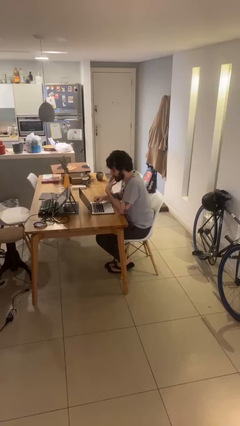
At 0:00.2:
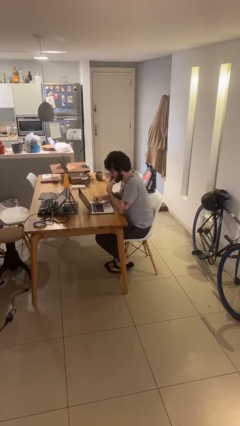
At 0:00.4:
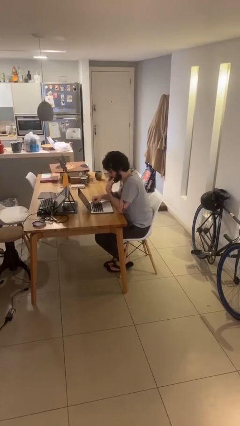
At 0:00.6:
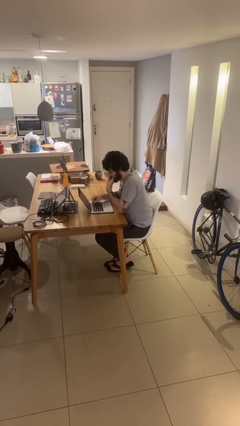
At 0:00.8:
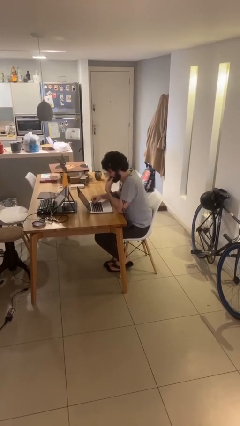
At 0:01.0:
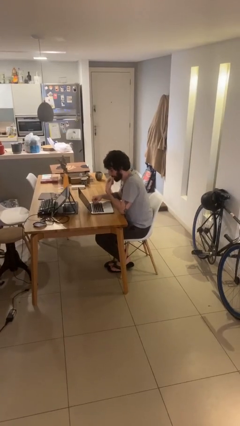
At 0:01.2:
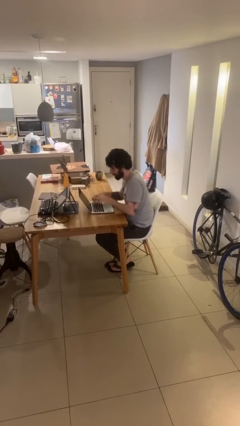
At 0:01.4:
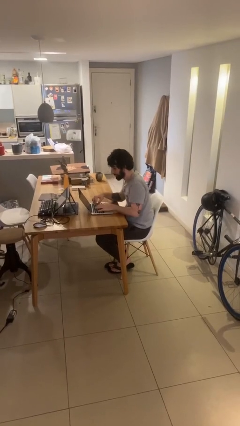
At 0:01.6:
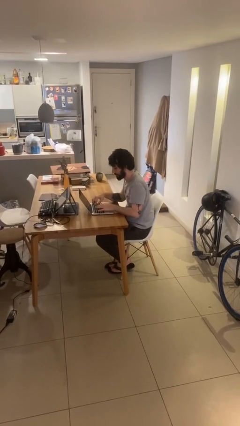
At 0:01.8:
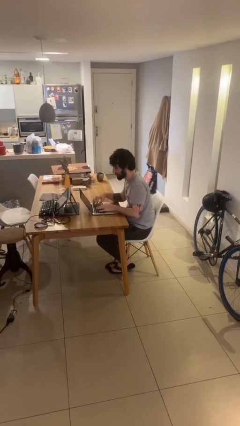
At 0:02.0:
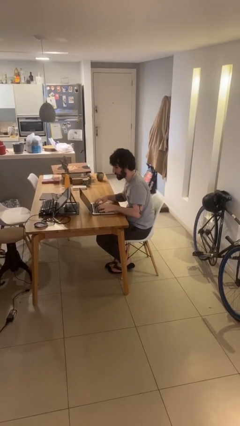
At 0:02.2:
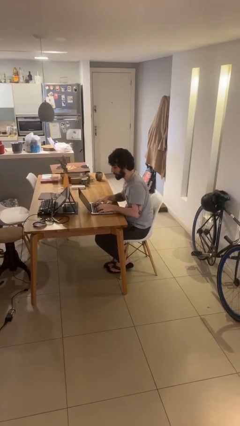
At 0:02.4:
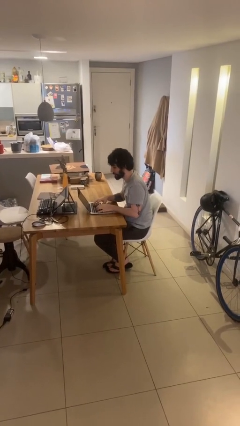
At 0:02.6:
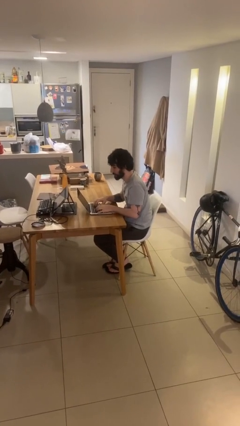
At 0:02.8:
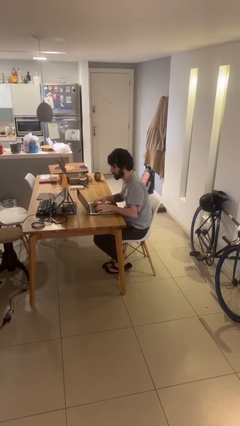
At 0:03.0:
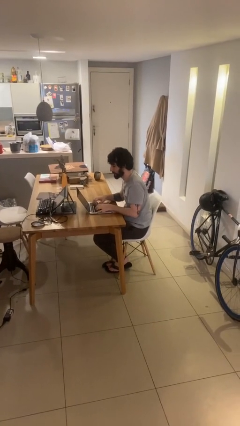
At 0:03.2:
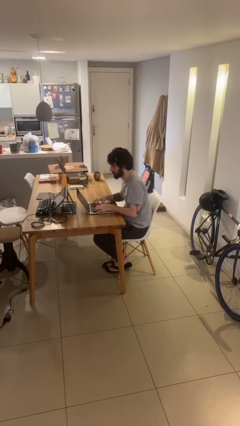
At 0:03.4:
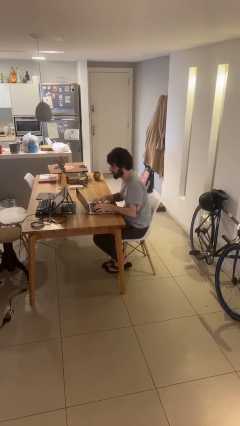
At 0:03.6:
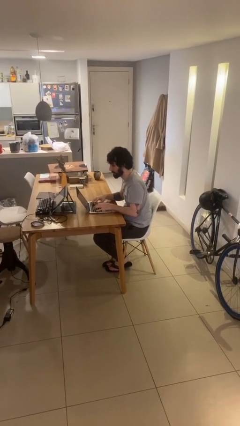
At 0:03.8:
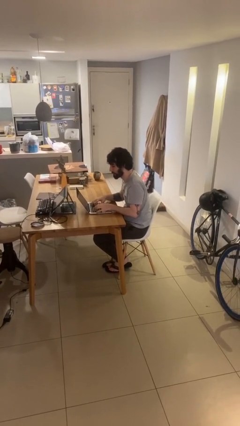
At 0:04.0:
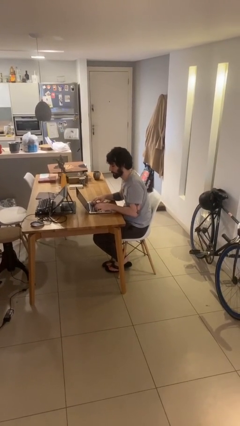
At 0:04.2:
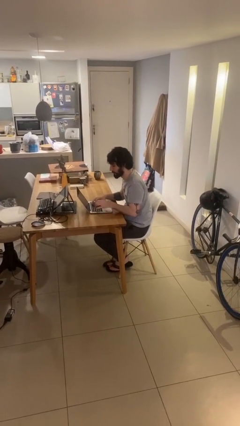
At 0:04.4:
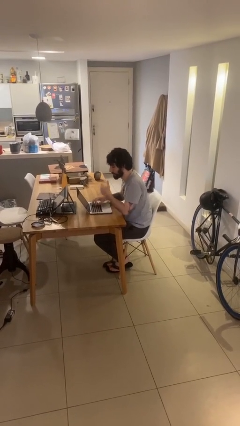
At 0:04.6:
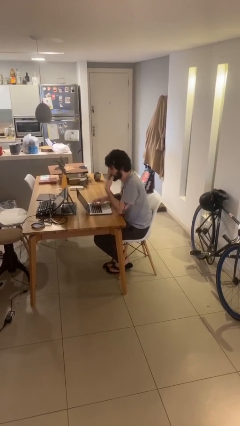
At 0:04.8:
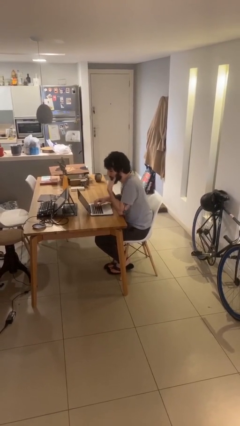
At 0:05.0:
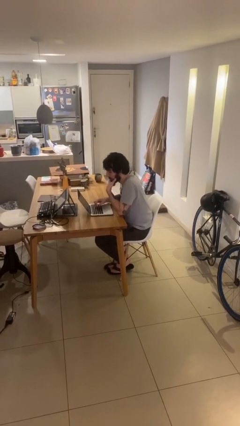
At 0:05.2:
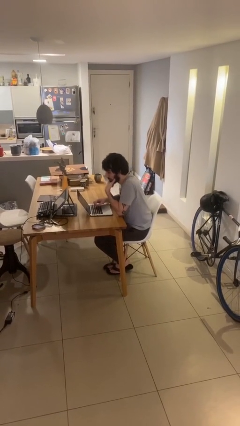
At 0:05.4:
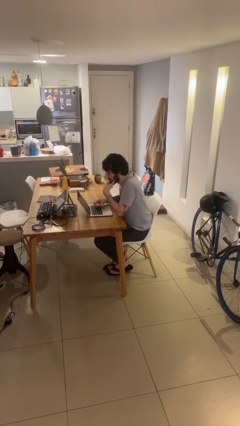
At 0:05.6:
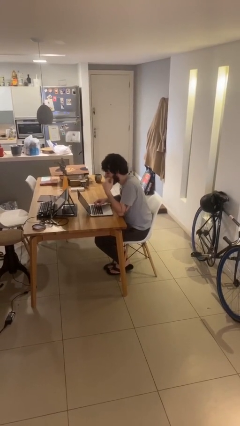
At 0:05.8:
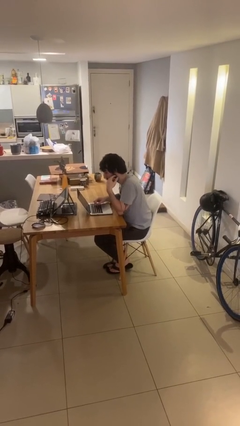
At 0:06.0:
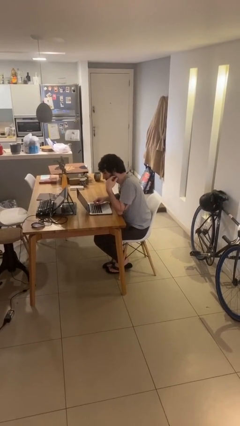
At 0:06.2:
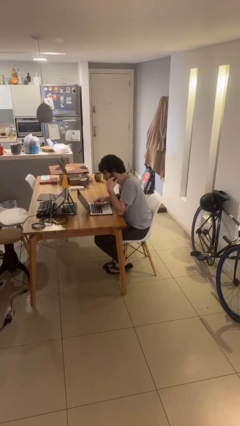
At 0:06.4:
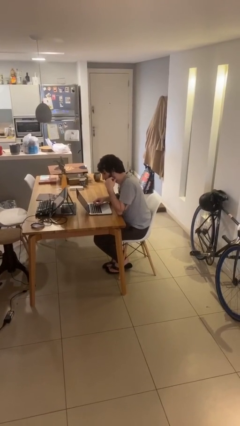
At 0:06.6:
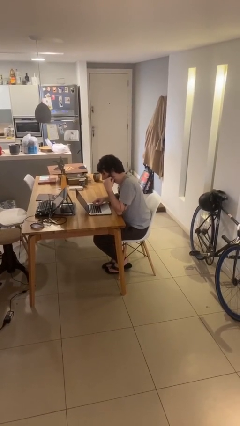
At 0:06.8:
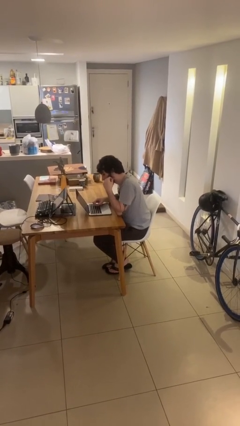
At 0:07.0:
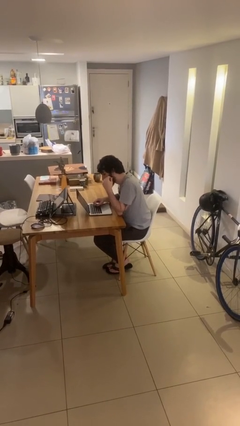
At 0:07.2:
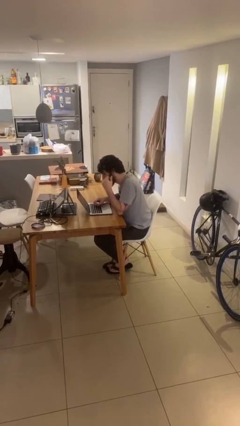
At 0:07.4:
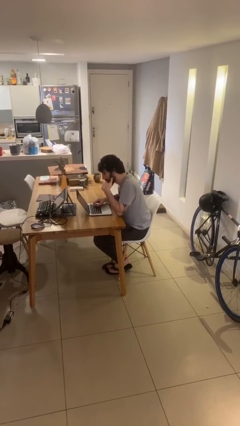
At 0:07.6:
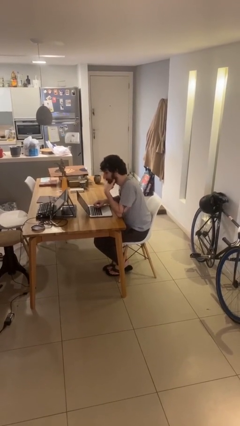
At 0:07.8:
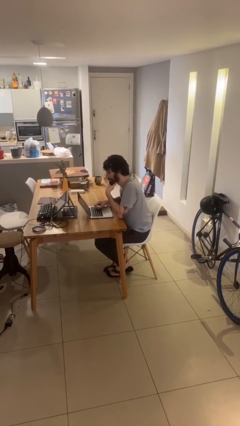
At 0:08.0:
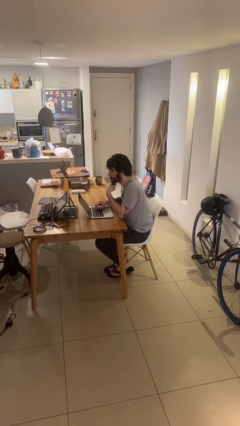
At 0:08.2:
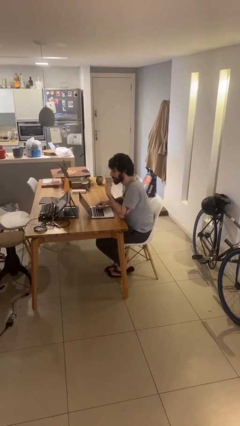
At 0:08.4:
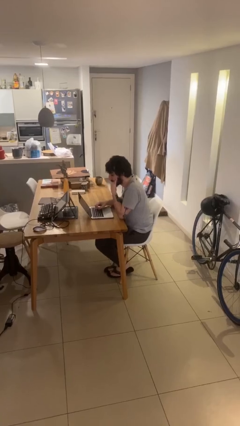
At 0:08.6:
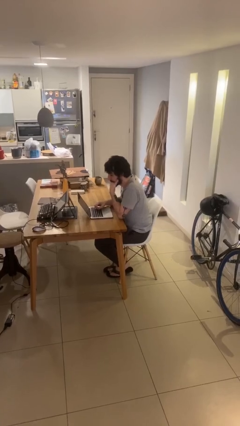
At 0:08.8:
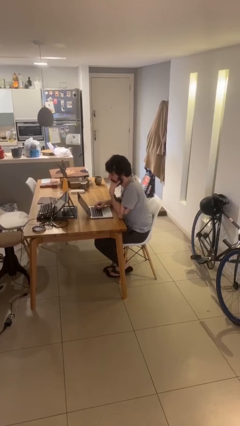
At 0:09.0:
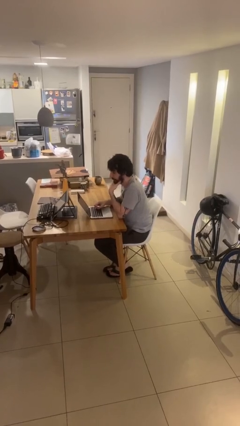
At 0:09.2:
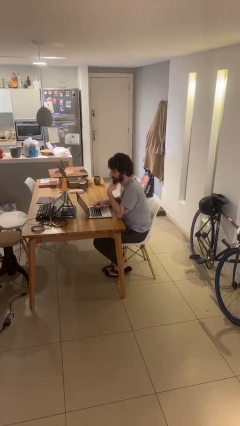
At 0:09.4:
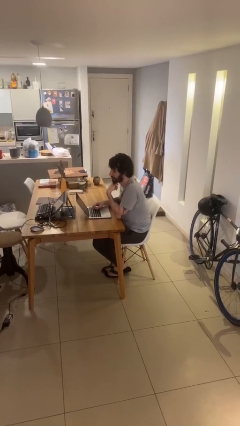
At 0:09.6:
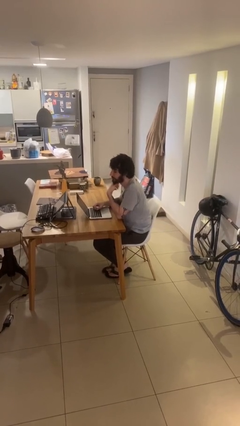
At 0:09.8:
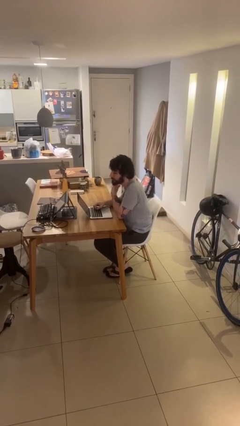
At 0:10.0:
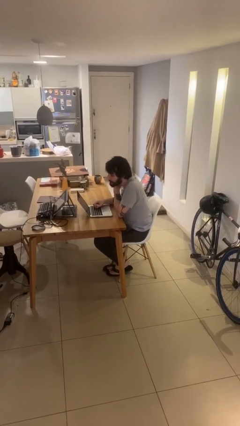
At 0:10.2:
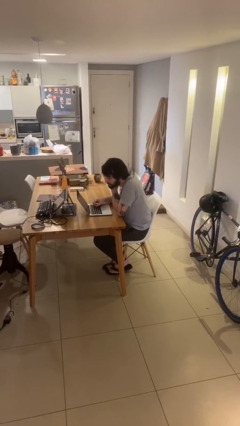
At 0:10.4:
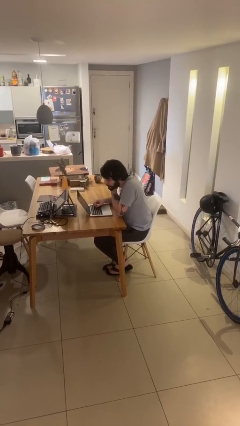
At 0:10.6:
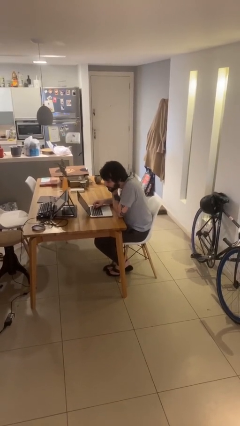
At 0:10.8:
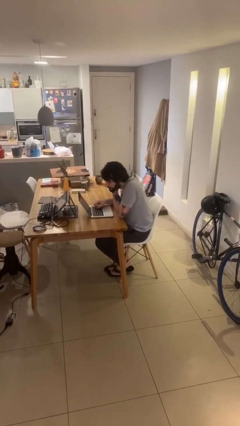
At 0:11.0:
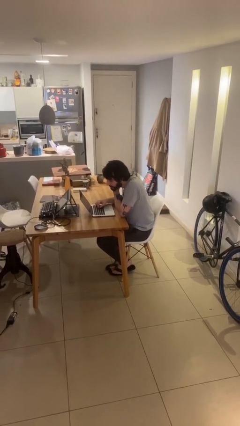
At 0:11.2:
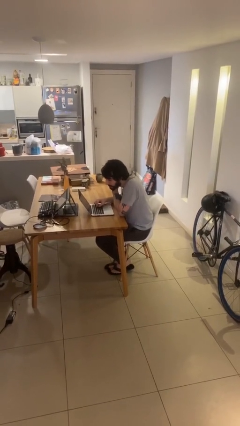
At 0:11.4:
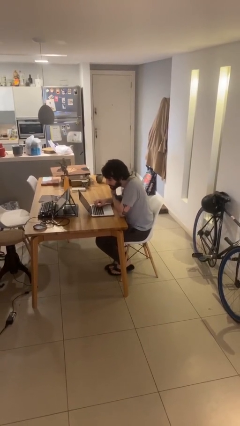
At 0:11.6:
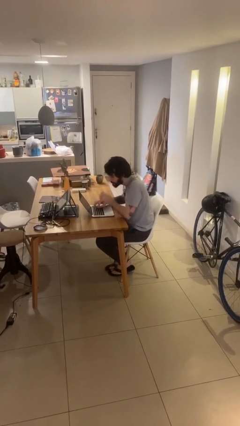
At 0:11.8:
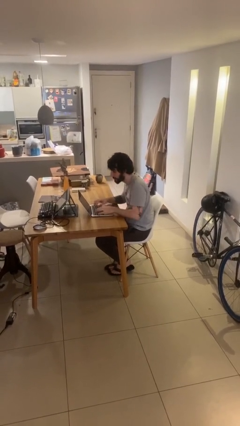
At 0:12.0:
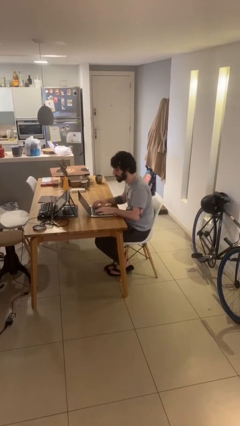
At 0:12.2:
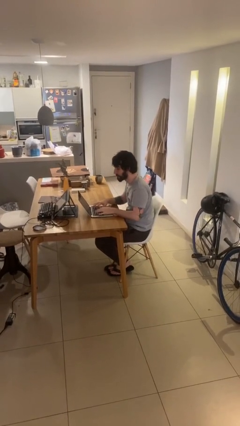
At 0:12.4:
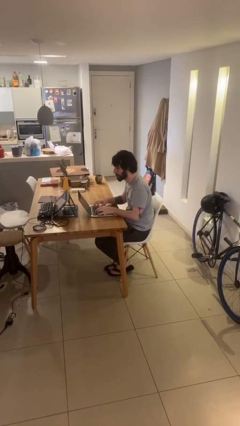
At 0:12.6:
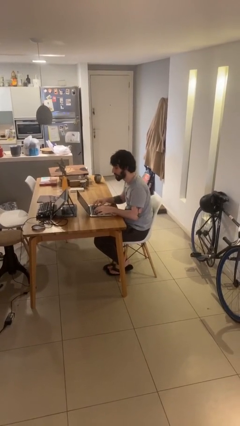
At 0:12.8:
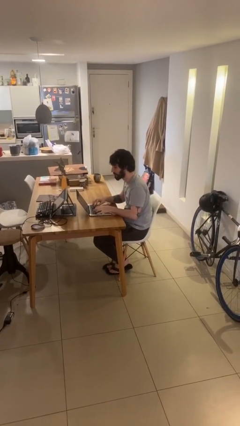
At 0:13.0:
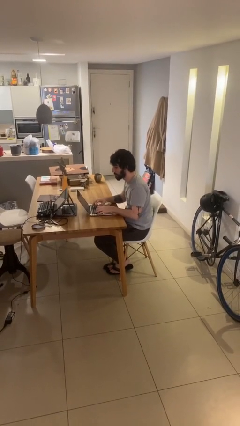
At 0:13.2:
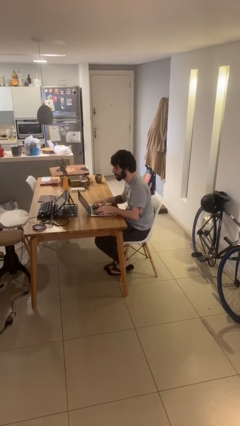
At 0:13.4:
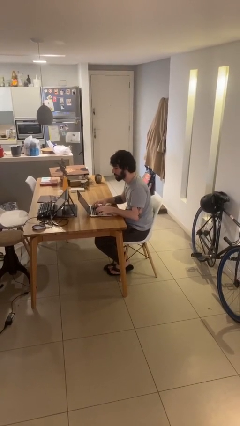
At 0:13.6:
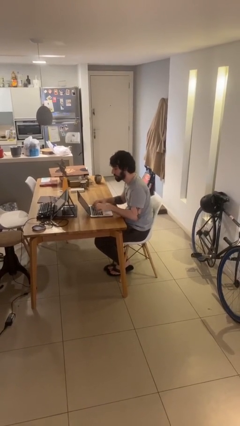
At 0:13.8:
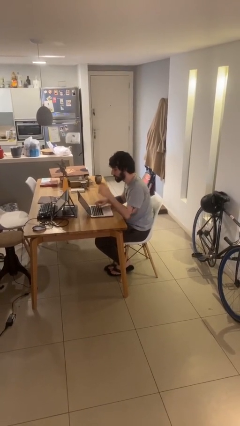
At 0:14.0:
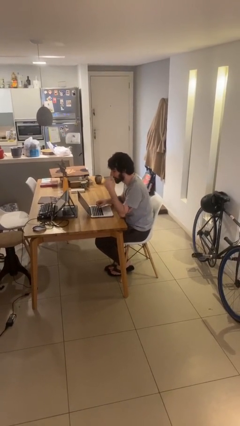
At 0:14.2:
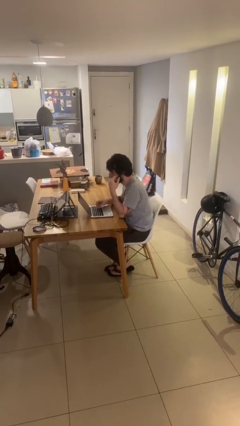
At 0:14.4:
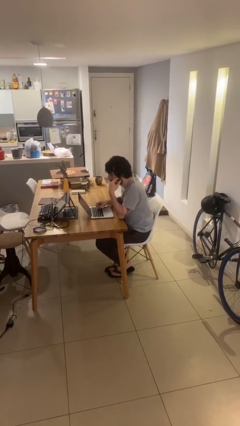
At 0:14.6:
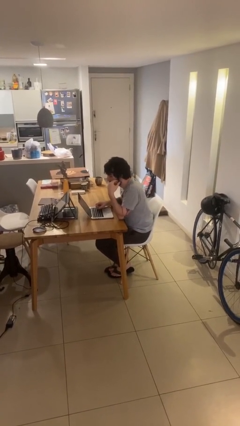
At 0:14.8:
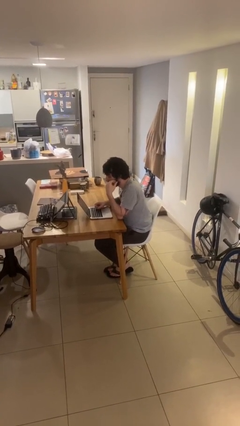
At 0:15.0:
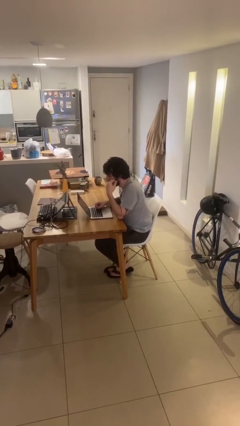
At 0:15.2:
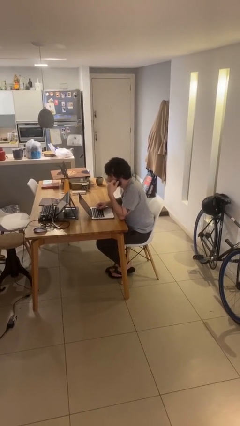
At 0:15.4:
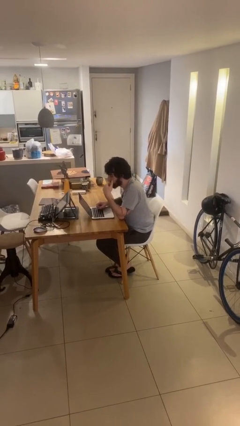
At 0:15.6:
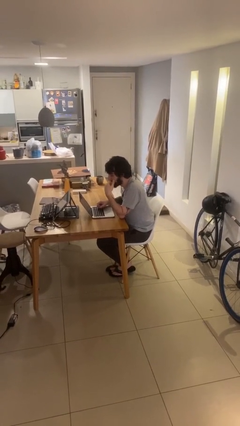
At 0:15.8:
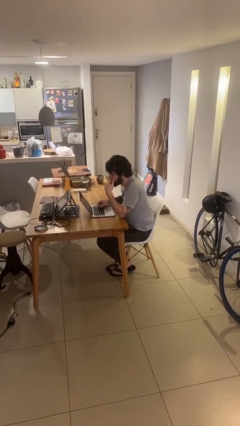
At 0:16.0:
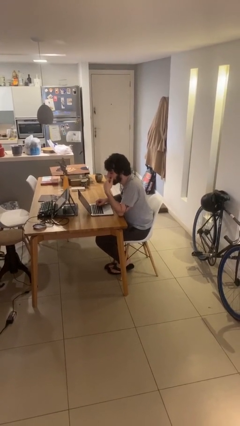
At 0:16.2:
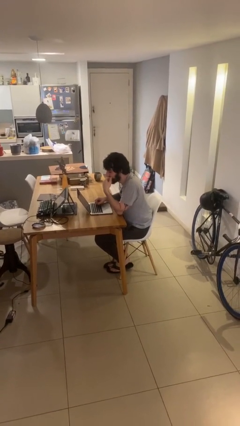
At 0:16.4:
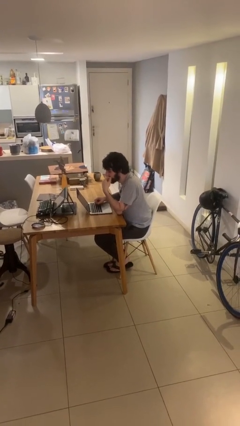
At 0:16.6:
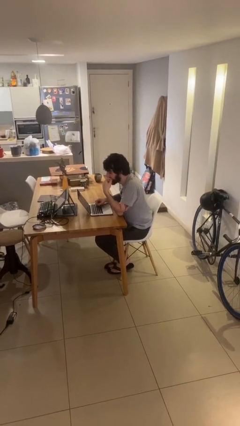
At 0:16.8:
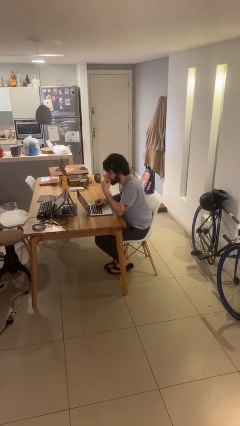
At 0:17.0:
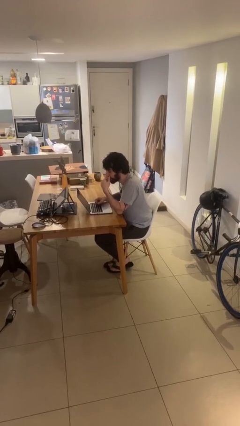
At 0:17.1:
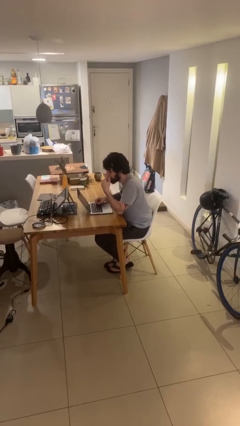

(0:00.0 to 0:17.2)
person interacts with laptop

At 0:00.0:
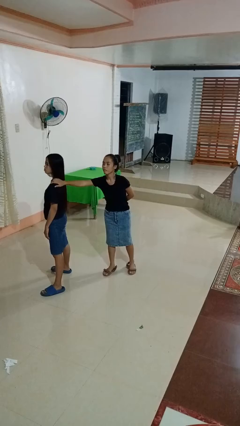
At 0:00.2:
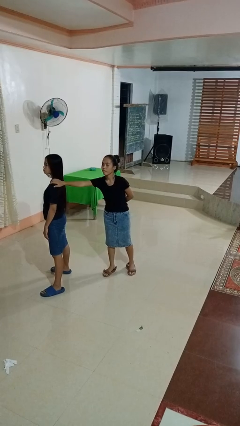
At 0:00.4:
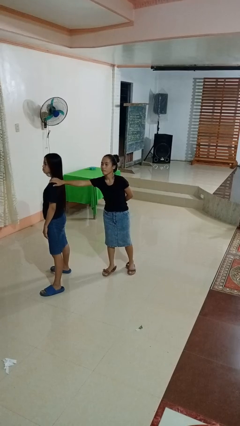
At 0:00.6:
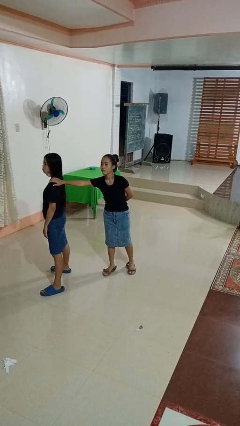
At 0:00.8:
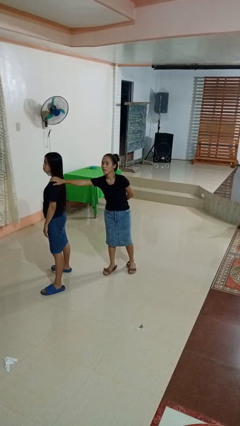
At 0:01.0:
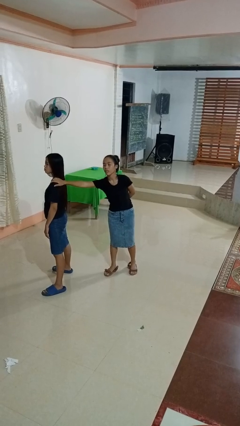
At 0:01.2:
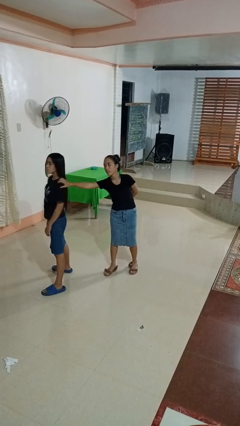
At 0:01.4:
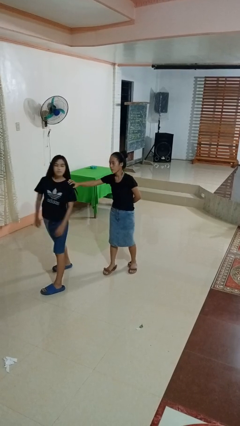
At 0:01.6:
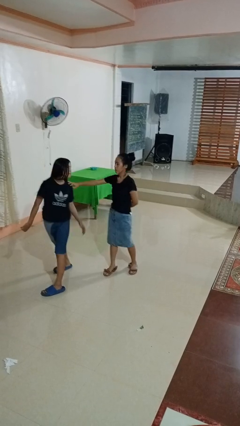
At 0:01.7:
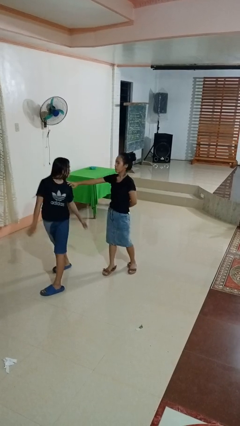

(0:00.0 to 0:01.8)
person grabs person by shoulder
